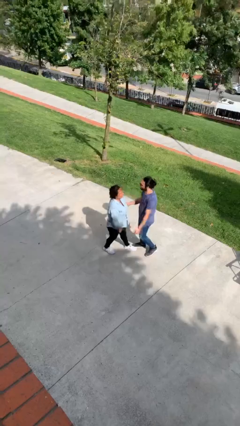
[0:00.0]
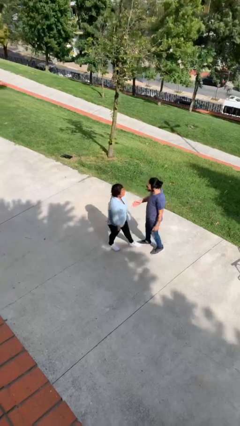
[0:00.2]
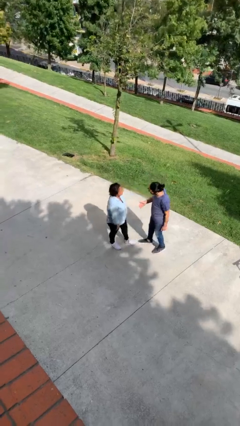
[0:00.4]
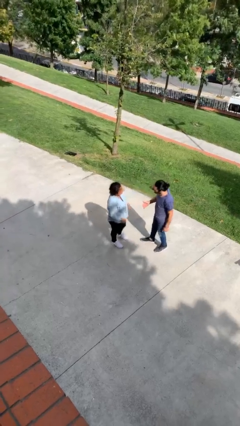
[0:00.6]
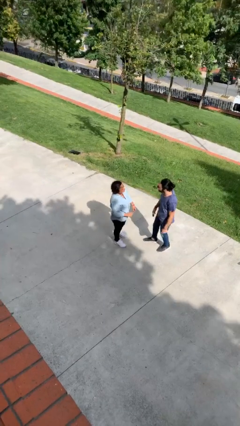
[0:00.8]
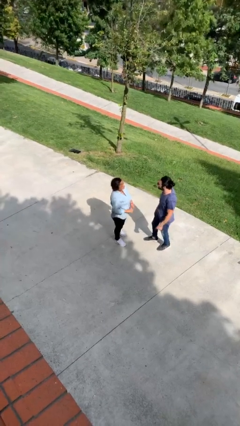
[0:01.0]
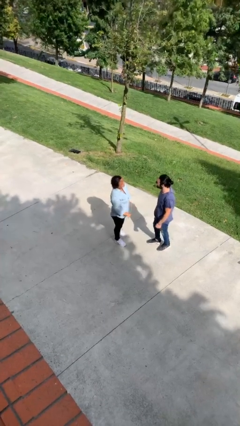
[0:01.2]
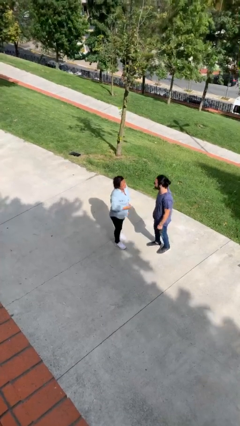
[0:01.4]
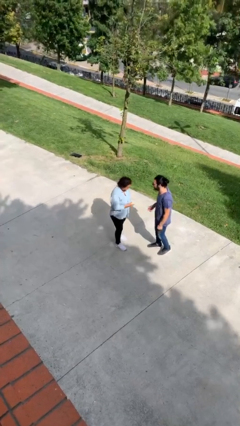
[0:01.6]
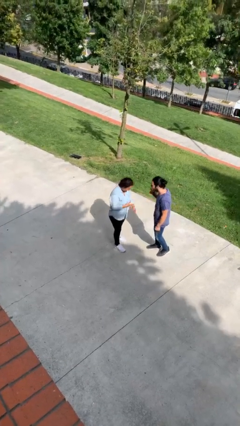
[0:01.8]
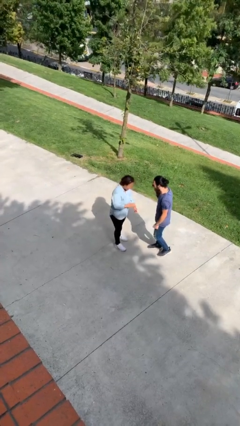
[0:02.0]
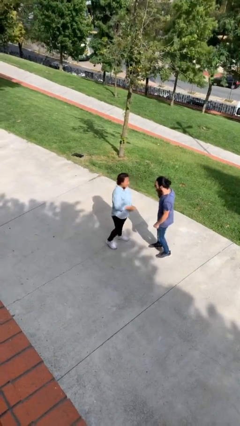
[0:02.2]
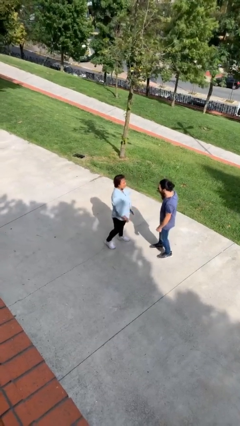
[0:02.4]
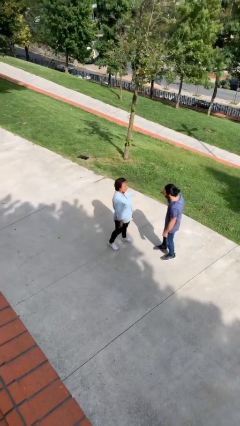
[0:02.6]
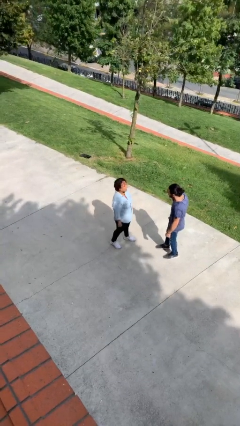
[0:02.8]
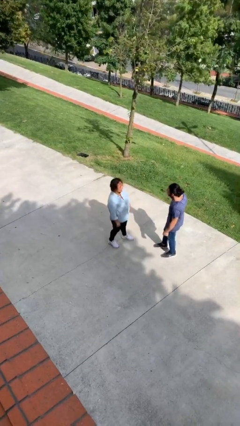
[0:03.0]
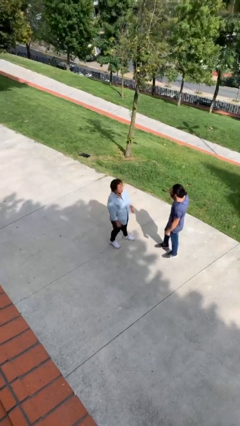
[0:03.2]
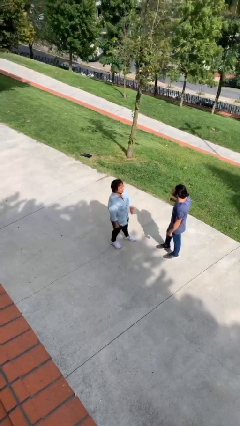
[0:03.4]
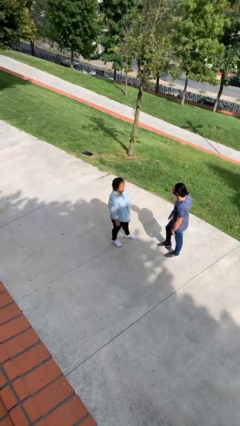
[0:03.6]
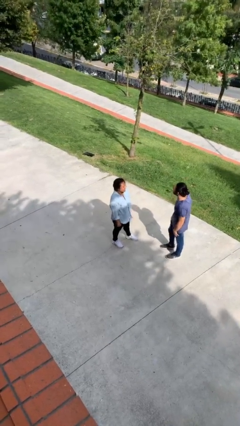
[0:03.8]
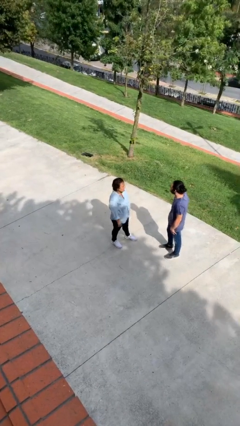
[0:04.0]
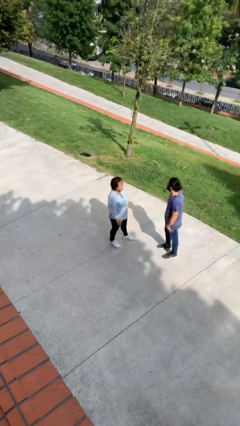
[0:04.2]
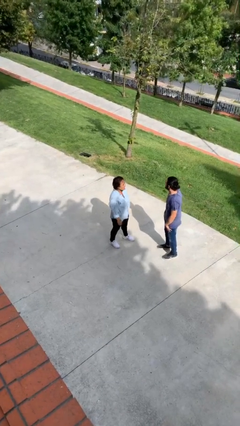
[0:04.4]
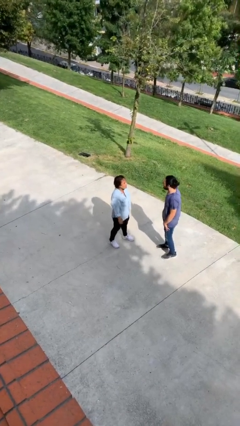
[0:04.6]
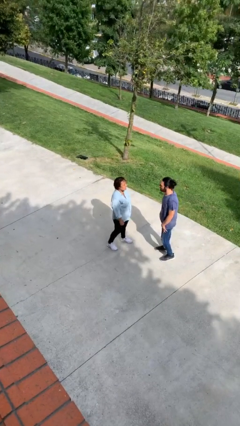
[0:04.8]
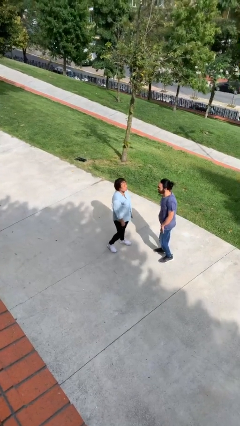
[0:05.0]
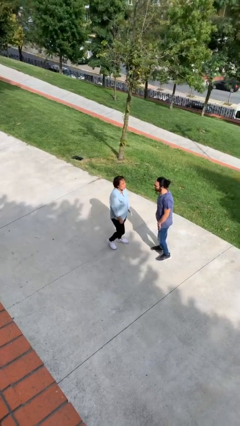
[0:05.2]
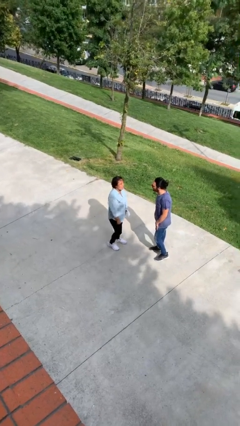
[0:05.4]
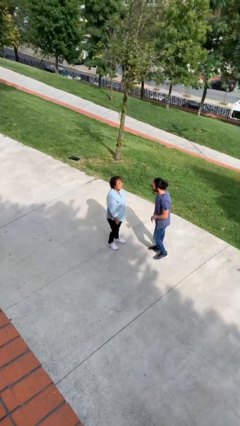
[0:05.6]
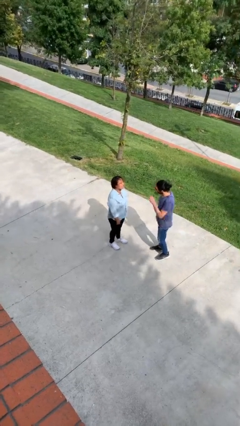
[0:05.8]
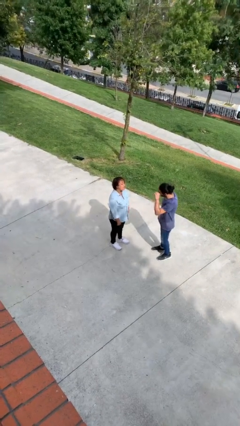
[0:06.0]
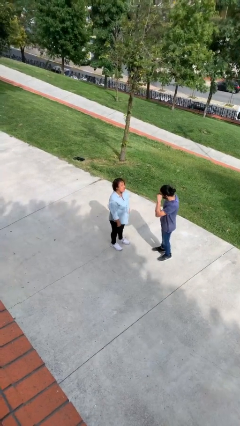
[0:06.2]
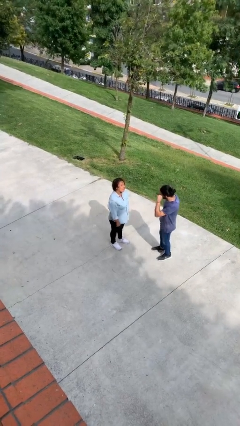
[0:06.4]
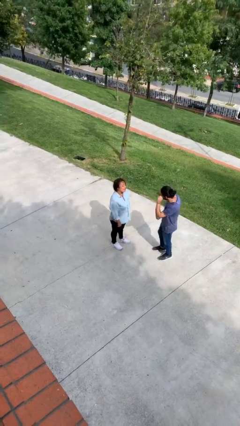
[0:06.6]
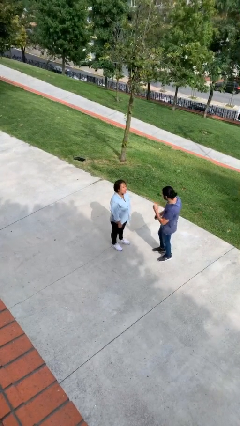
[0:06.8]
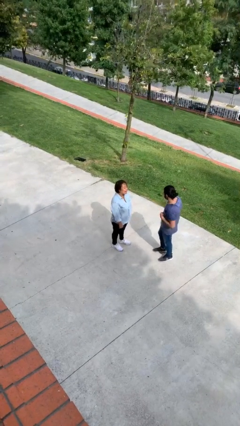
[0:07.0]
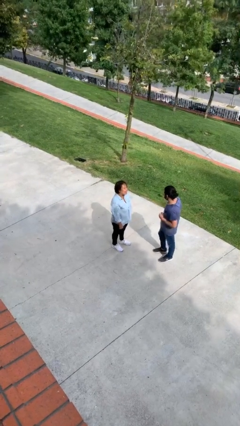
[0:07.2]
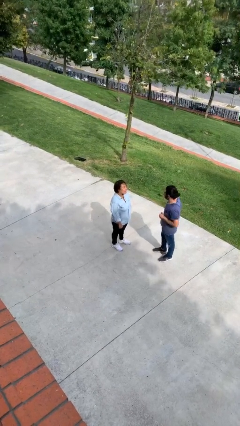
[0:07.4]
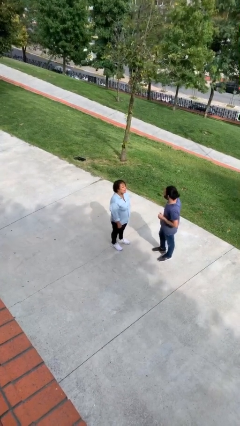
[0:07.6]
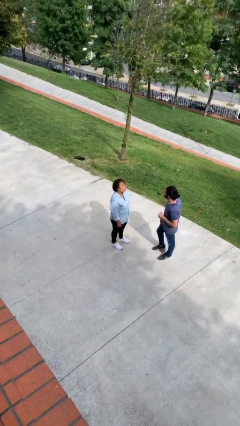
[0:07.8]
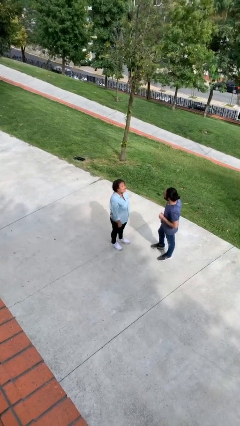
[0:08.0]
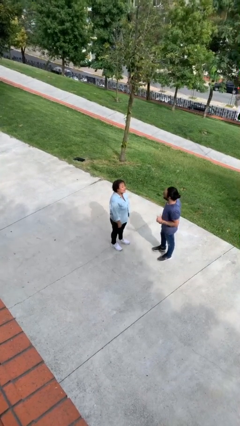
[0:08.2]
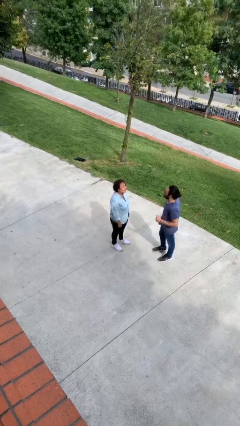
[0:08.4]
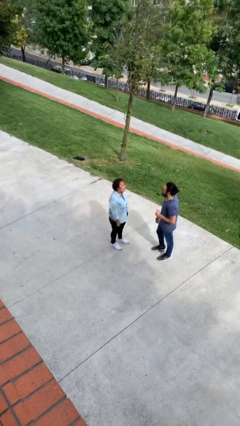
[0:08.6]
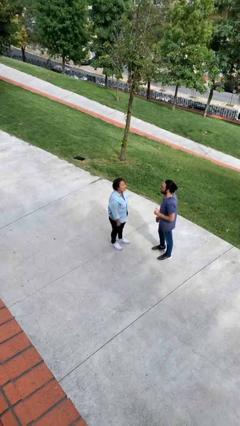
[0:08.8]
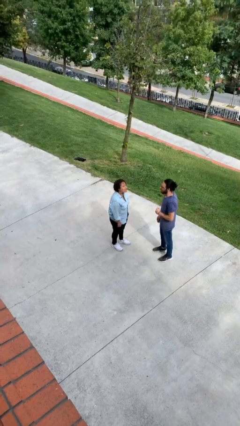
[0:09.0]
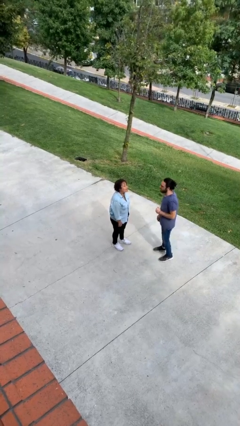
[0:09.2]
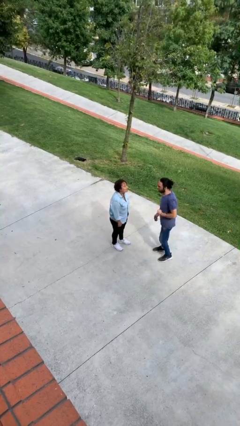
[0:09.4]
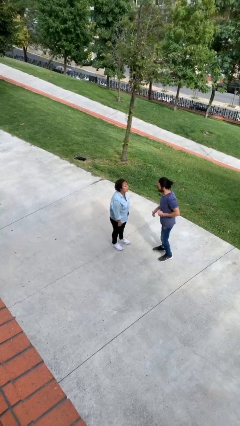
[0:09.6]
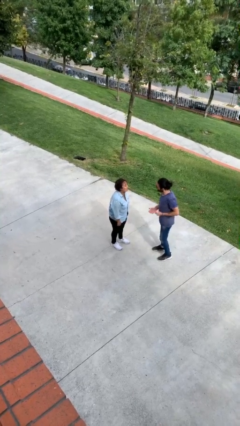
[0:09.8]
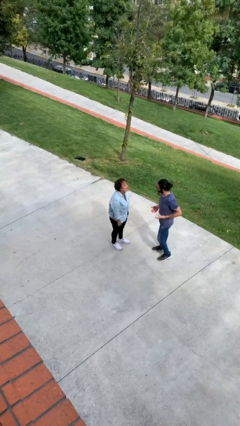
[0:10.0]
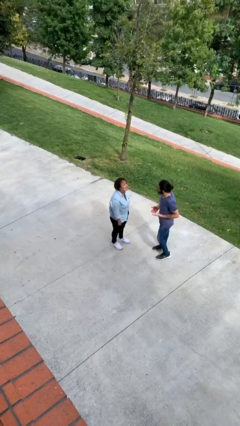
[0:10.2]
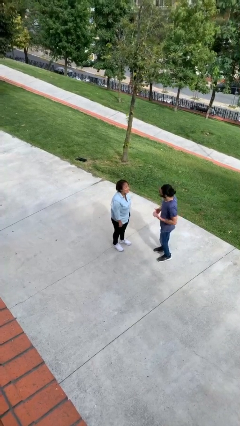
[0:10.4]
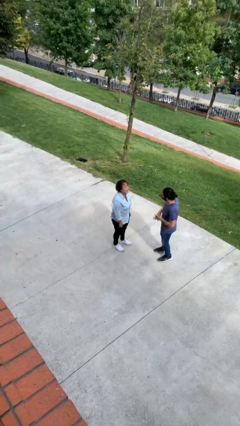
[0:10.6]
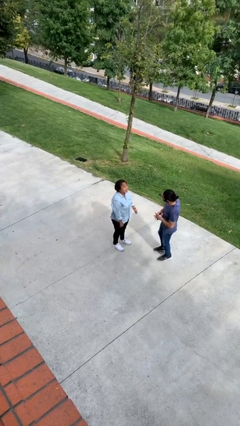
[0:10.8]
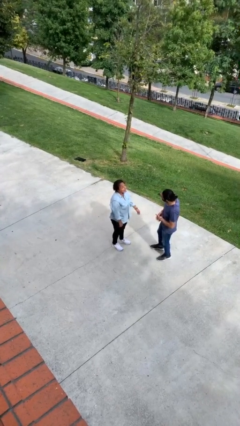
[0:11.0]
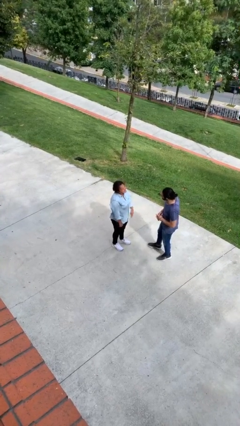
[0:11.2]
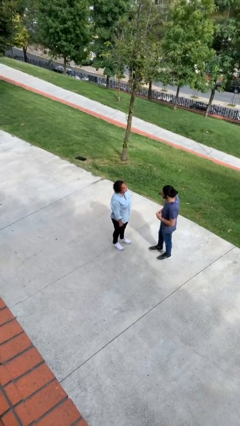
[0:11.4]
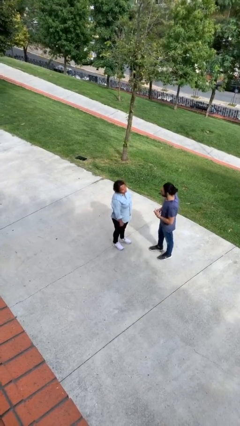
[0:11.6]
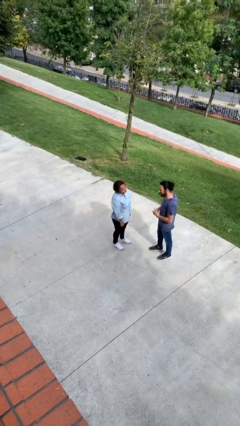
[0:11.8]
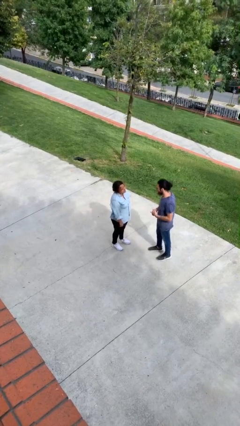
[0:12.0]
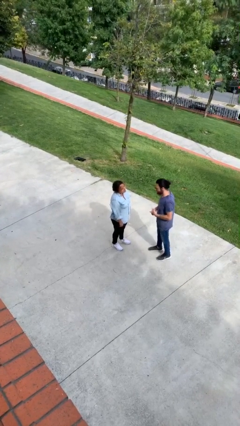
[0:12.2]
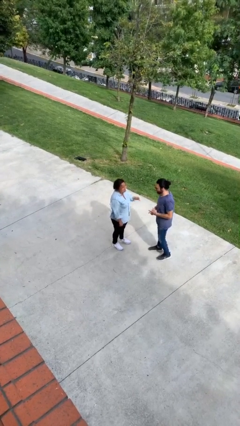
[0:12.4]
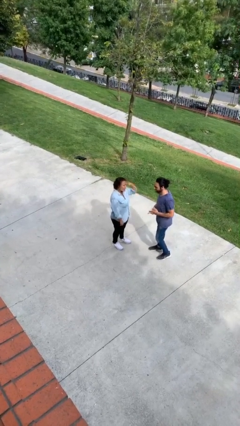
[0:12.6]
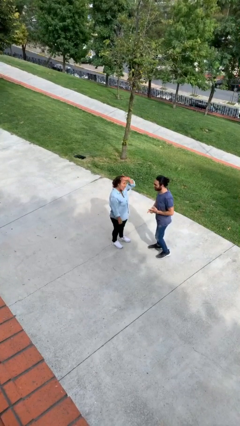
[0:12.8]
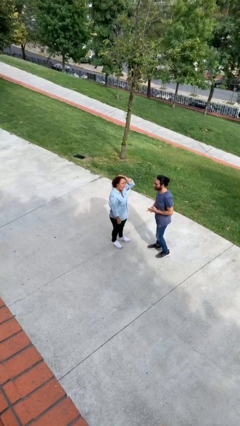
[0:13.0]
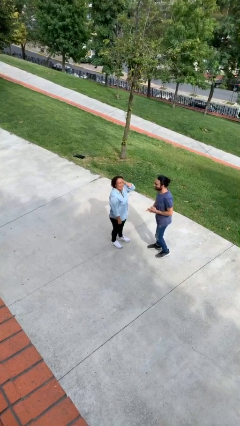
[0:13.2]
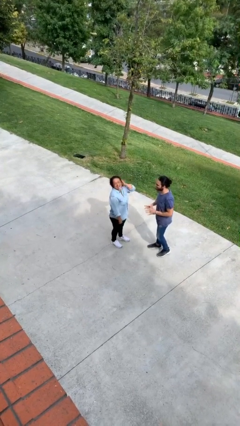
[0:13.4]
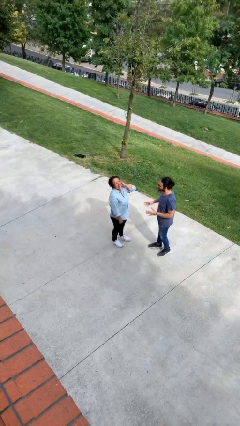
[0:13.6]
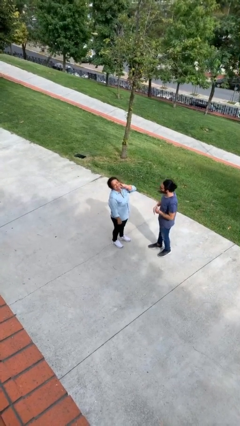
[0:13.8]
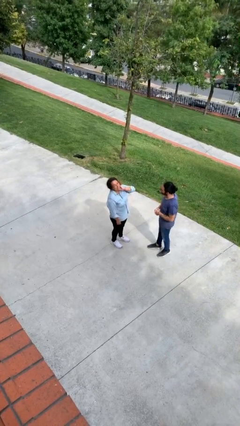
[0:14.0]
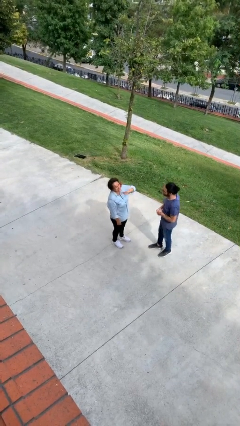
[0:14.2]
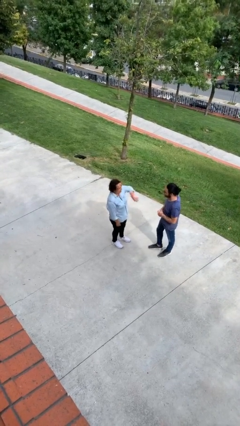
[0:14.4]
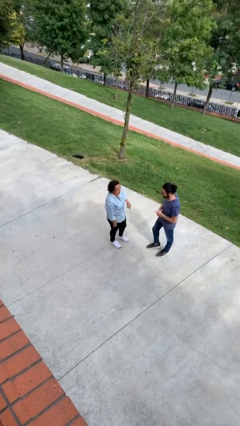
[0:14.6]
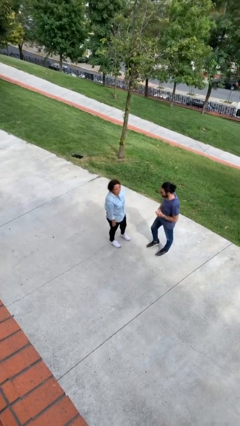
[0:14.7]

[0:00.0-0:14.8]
person talks to person

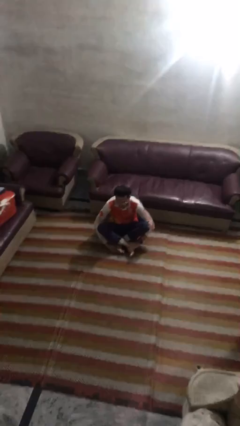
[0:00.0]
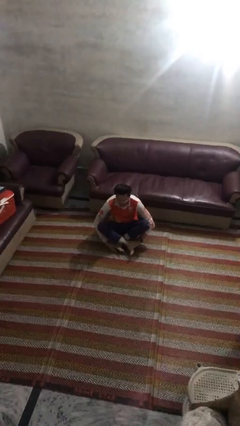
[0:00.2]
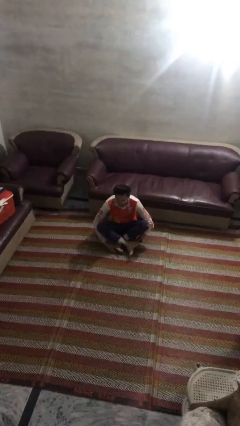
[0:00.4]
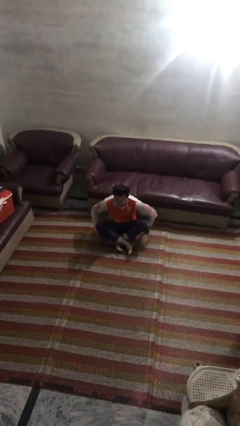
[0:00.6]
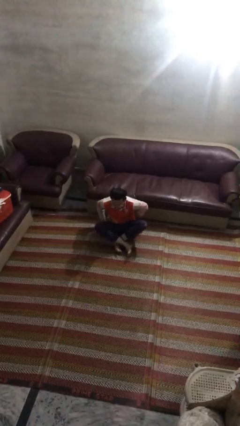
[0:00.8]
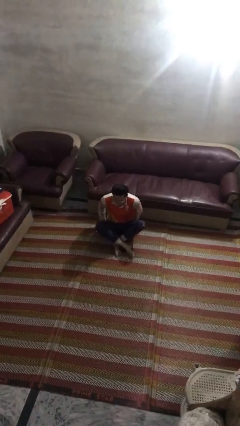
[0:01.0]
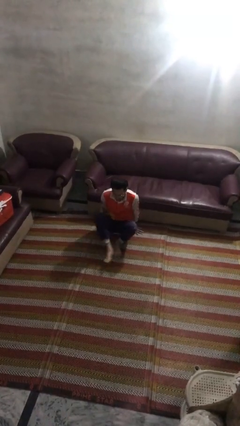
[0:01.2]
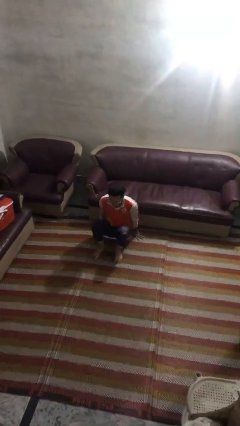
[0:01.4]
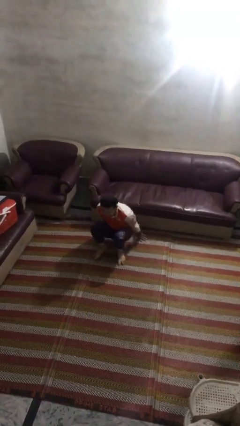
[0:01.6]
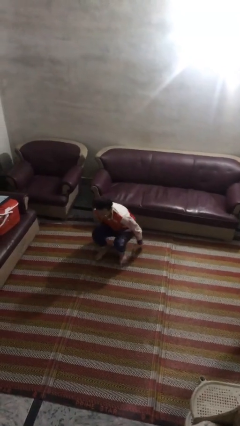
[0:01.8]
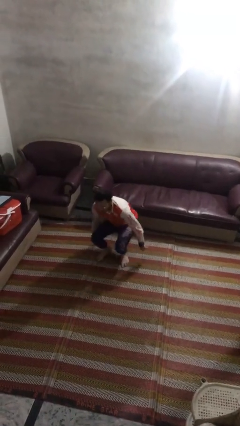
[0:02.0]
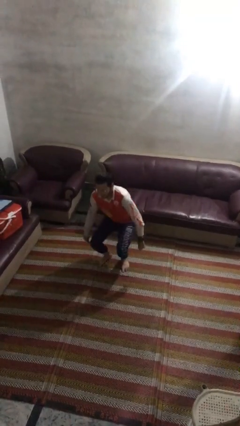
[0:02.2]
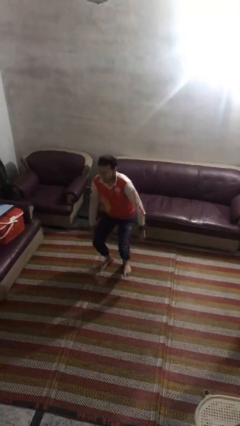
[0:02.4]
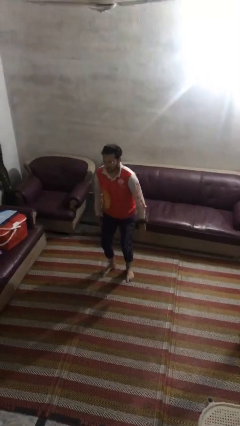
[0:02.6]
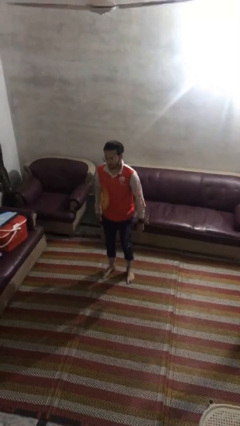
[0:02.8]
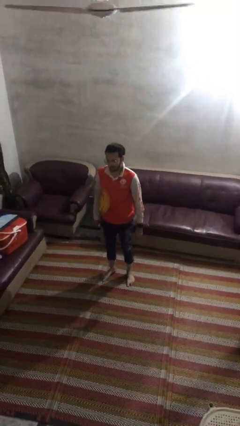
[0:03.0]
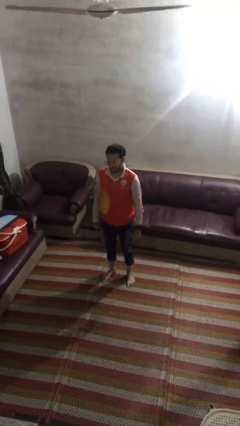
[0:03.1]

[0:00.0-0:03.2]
person stands up from floor
